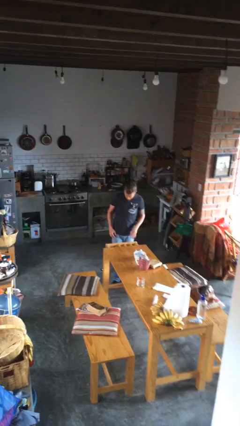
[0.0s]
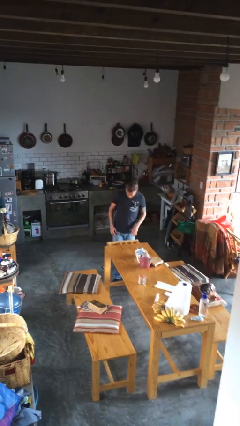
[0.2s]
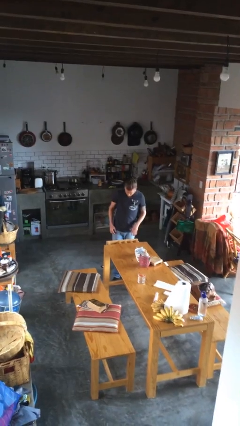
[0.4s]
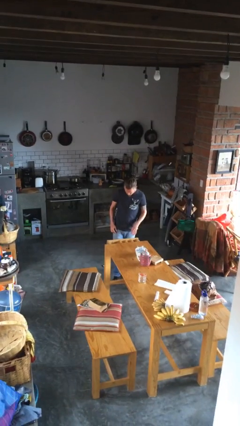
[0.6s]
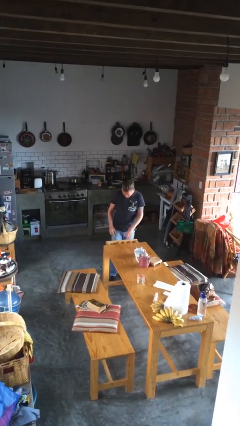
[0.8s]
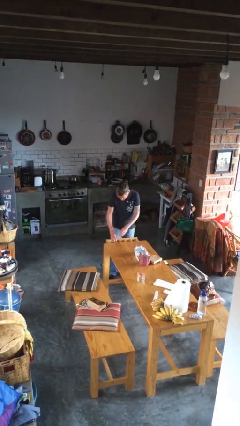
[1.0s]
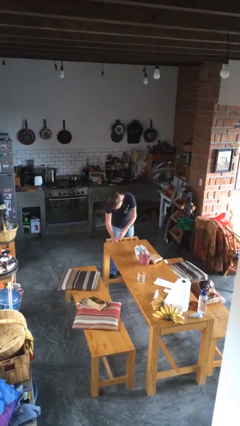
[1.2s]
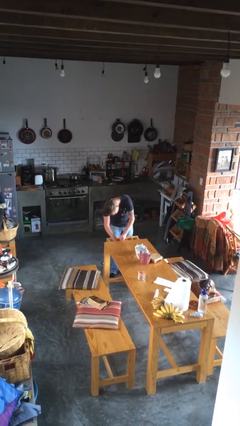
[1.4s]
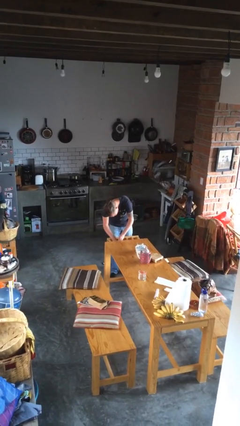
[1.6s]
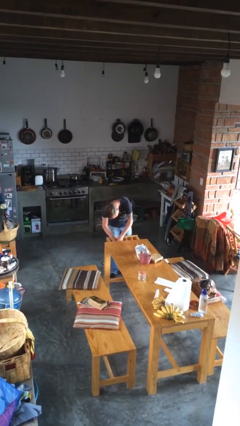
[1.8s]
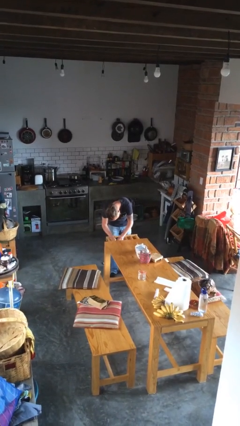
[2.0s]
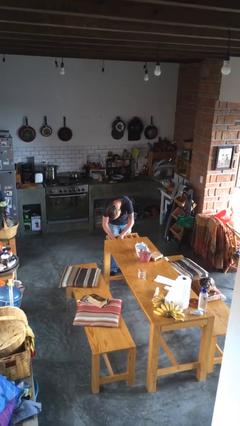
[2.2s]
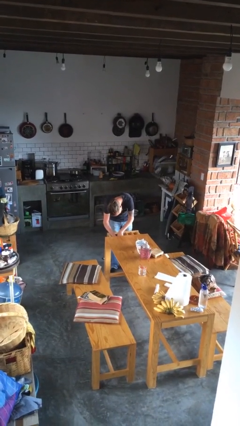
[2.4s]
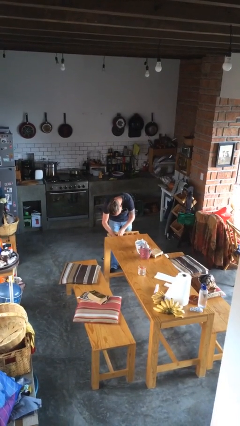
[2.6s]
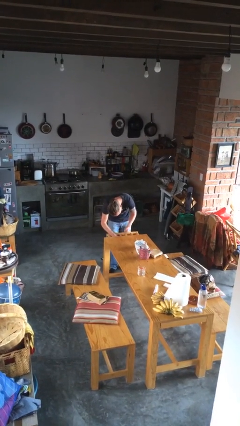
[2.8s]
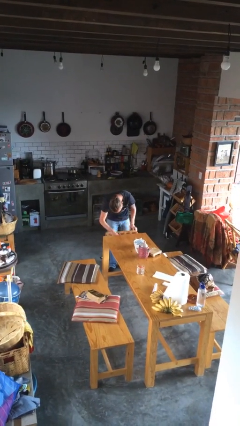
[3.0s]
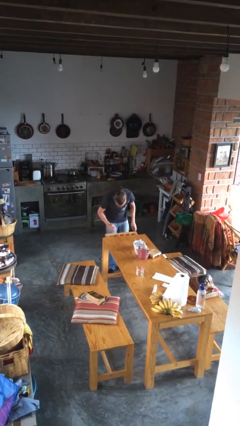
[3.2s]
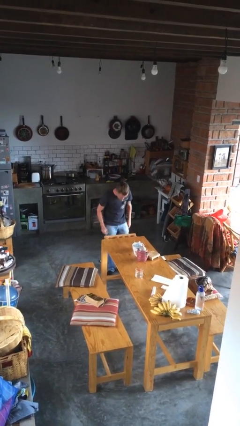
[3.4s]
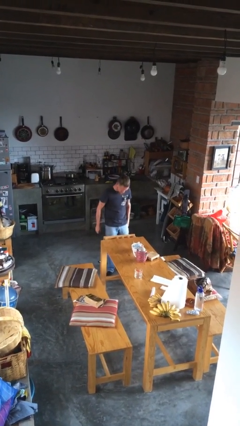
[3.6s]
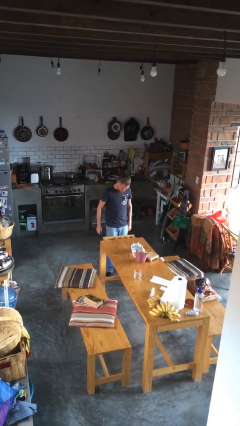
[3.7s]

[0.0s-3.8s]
person searches in cabinet

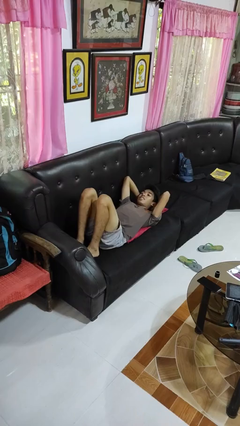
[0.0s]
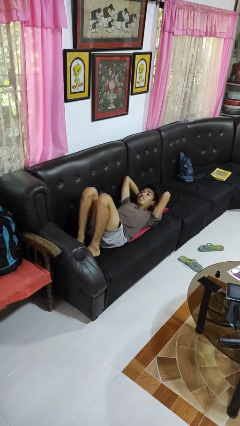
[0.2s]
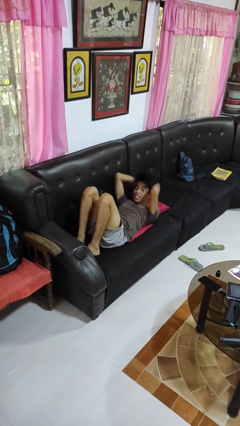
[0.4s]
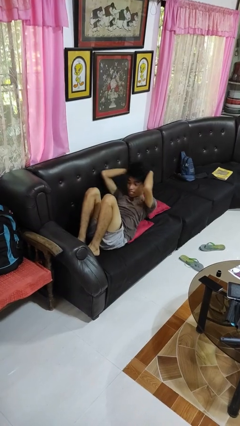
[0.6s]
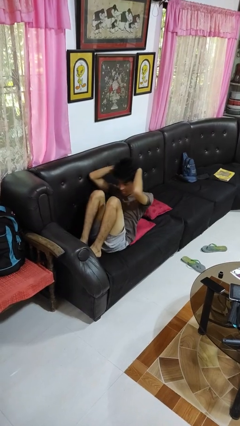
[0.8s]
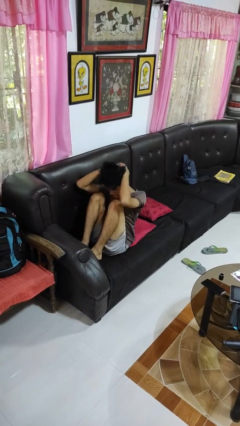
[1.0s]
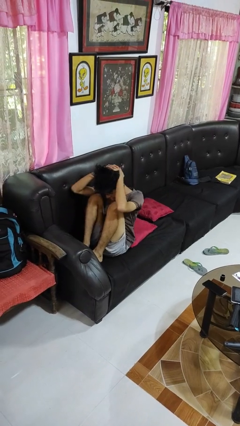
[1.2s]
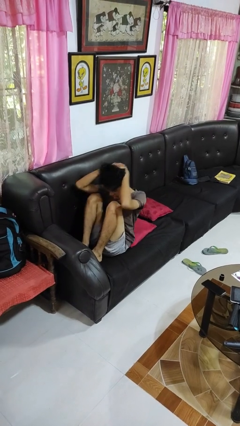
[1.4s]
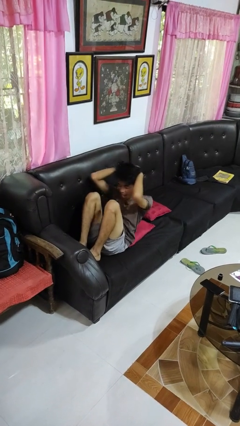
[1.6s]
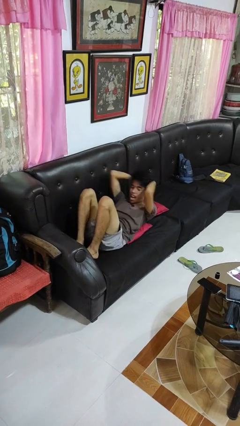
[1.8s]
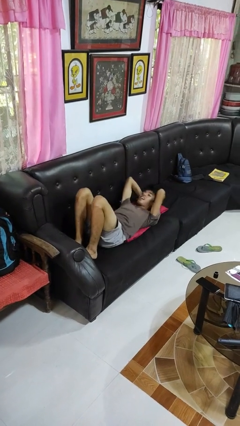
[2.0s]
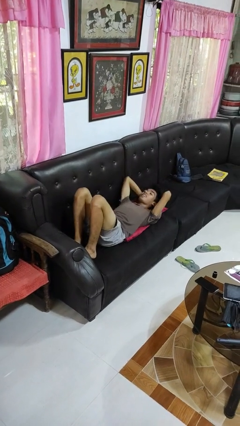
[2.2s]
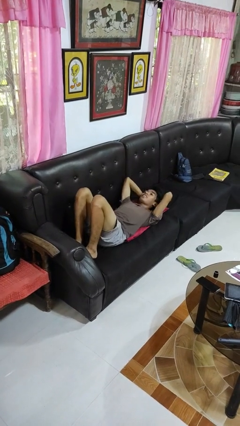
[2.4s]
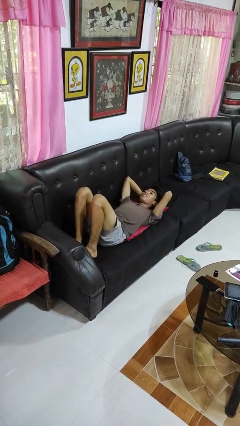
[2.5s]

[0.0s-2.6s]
person exercises with situp

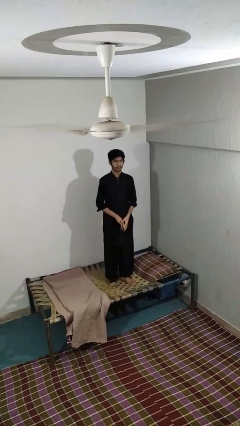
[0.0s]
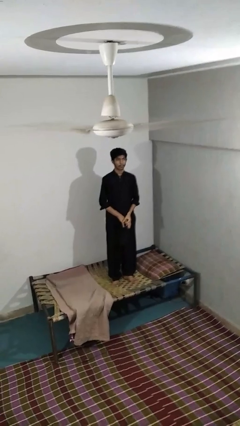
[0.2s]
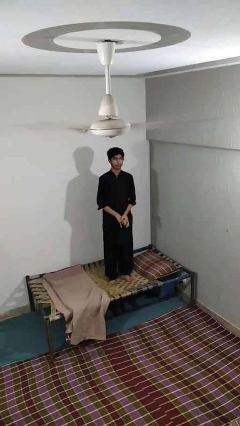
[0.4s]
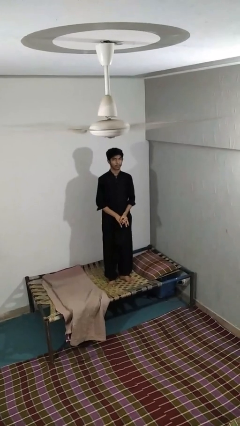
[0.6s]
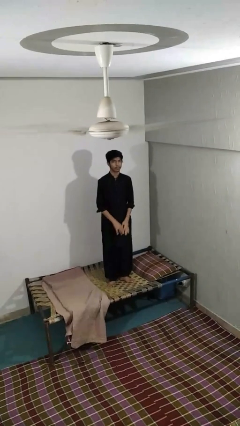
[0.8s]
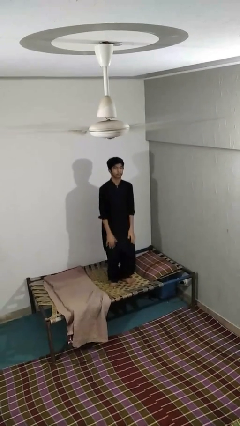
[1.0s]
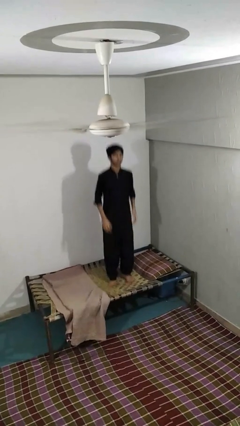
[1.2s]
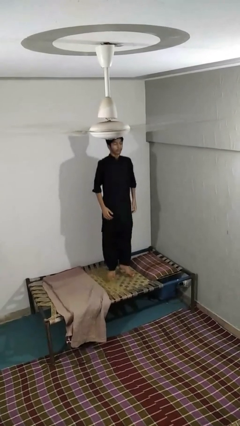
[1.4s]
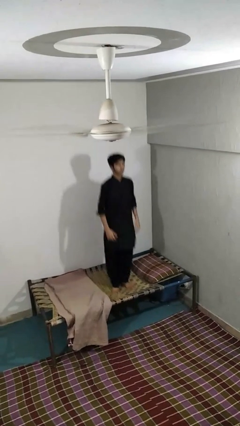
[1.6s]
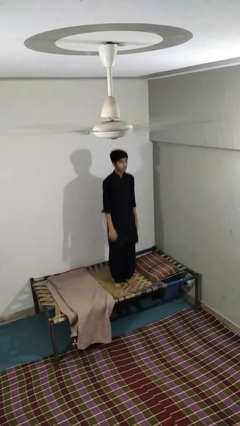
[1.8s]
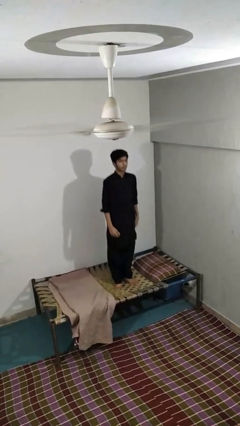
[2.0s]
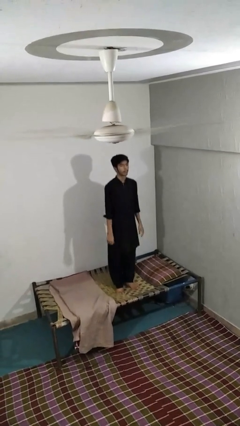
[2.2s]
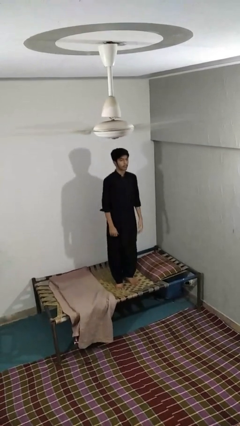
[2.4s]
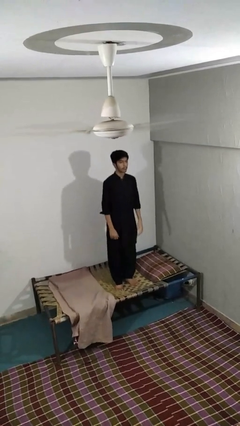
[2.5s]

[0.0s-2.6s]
person jumps on bed

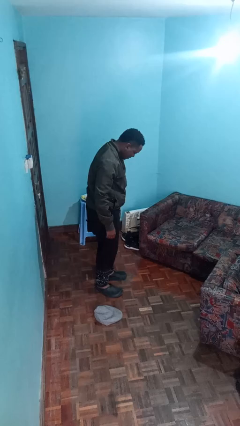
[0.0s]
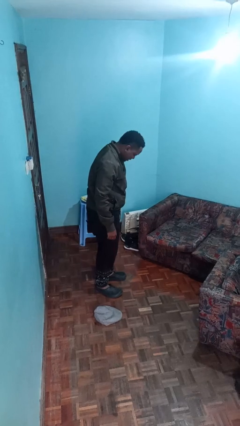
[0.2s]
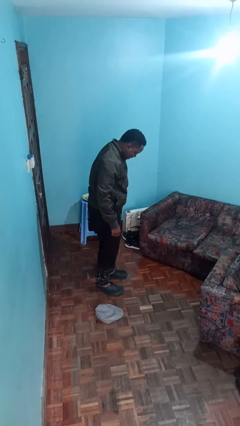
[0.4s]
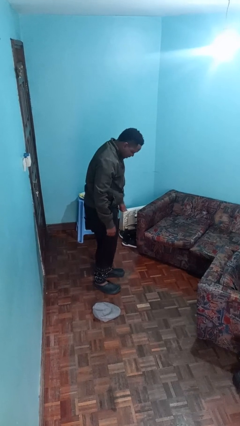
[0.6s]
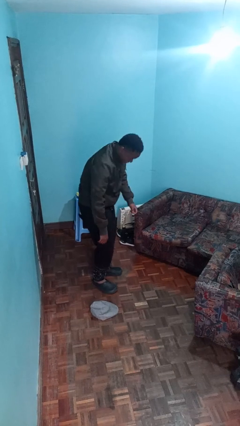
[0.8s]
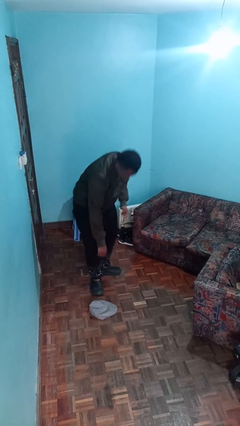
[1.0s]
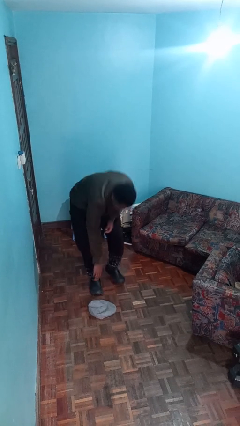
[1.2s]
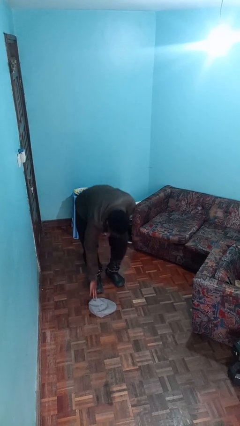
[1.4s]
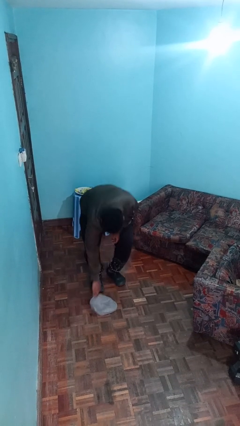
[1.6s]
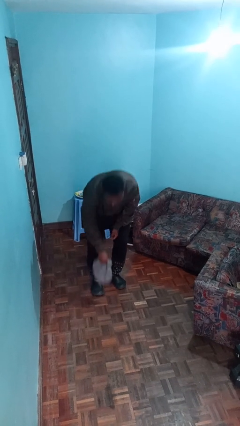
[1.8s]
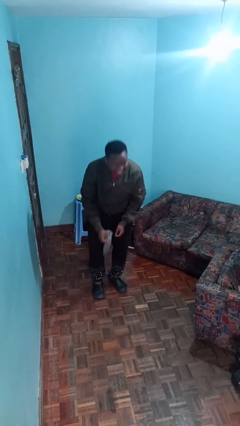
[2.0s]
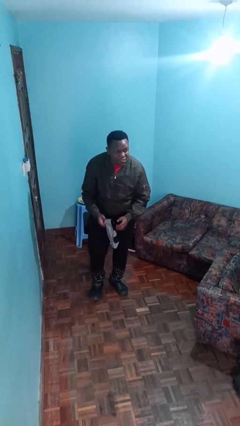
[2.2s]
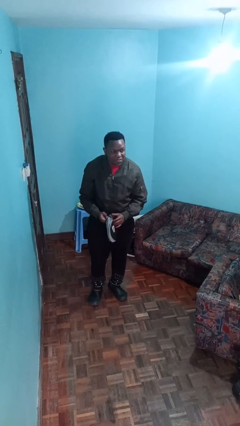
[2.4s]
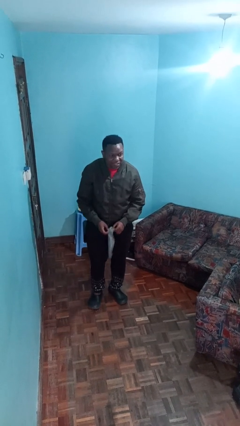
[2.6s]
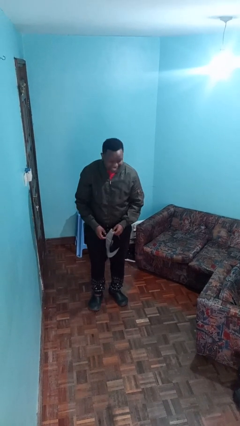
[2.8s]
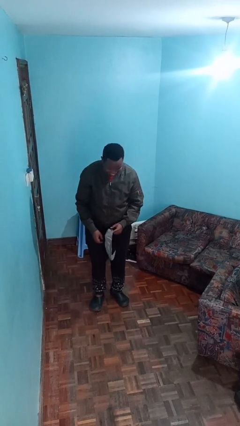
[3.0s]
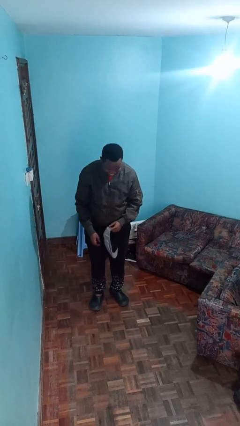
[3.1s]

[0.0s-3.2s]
person picks up object from floor

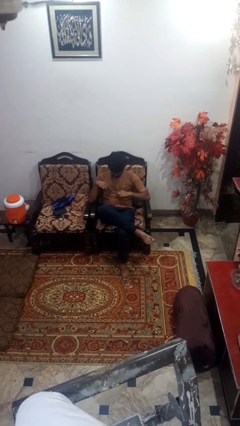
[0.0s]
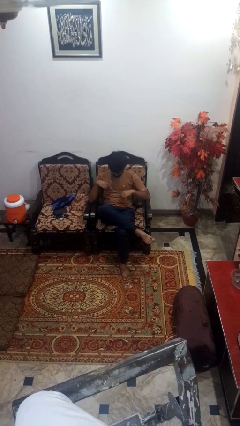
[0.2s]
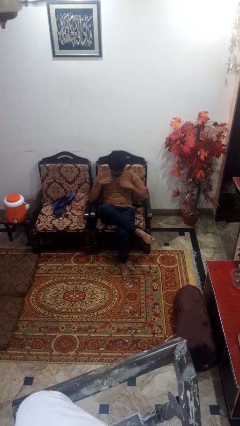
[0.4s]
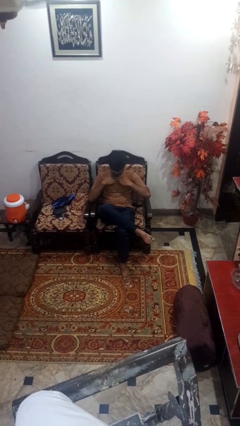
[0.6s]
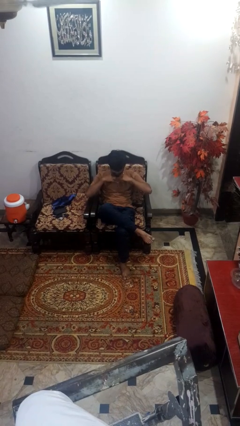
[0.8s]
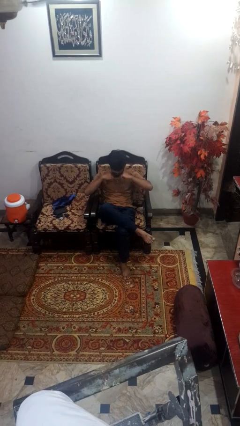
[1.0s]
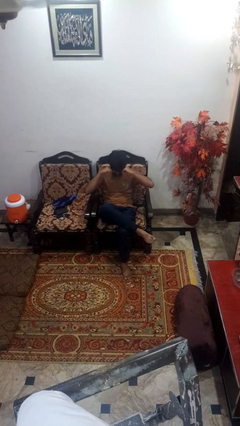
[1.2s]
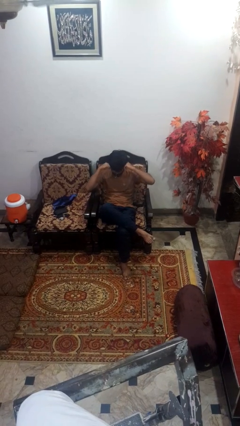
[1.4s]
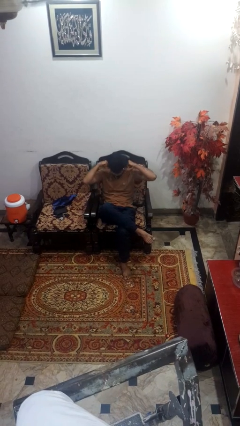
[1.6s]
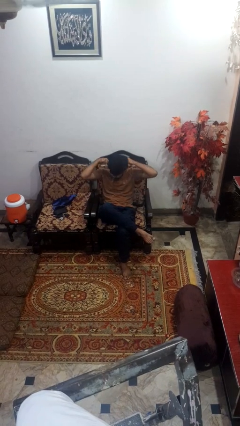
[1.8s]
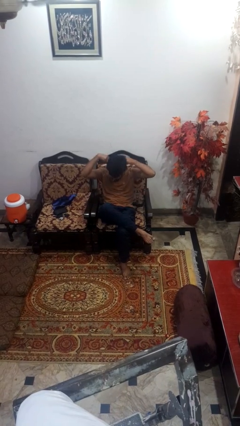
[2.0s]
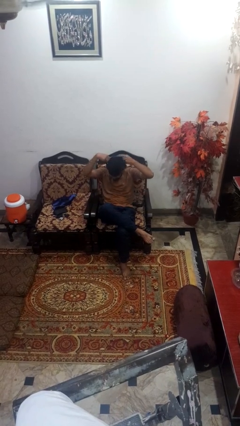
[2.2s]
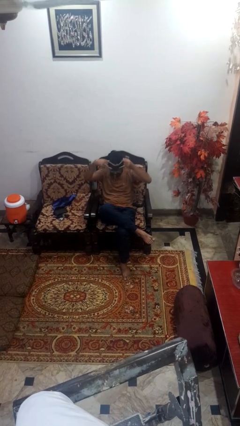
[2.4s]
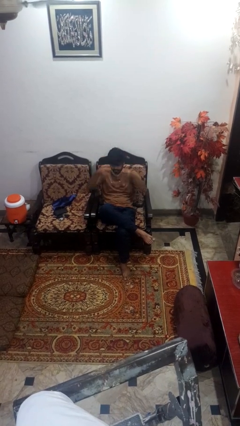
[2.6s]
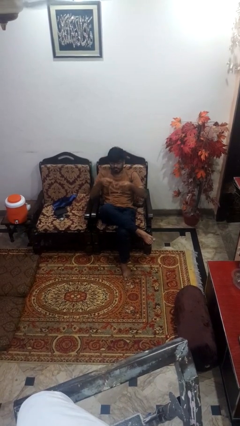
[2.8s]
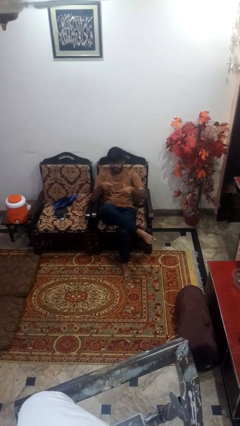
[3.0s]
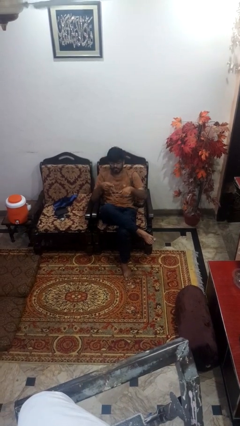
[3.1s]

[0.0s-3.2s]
person takes off necklace

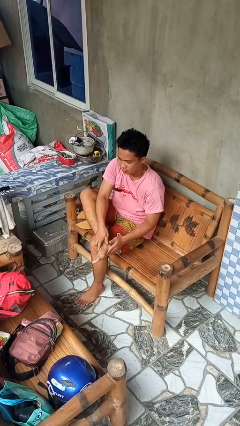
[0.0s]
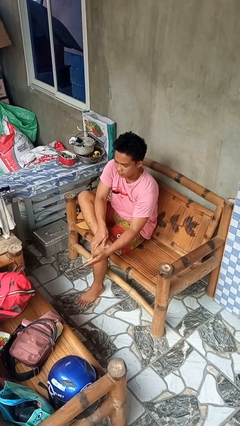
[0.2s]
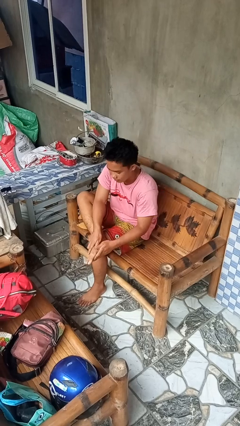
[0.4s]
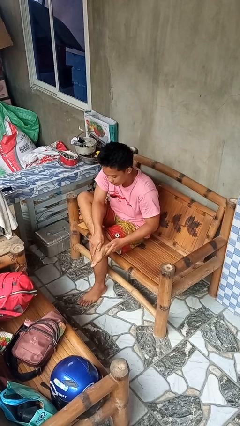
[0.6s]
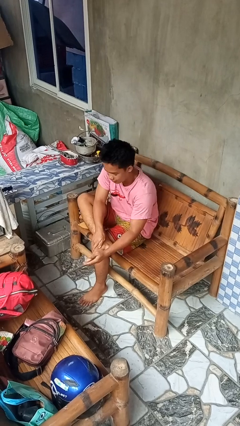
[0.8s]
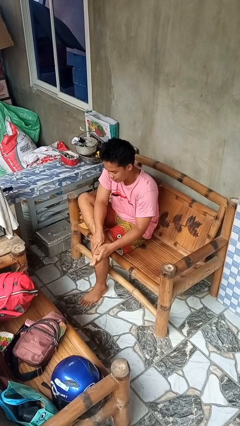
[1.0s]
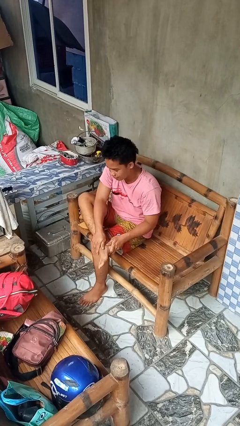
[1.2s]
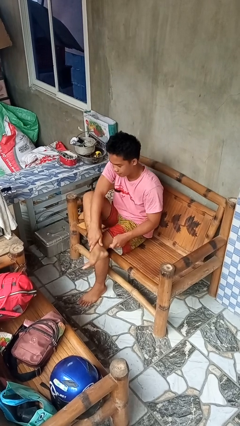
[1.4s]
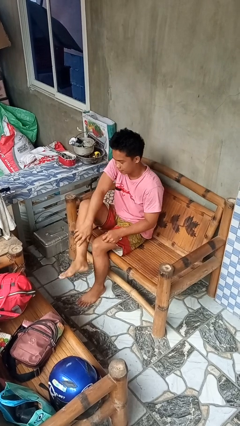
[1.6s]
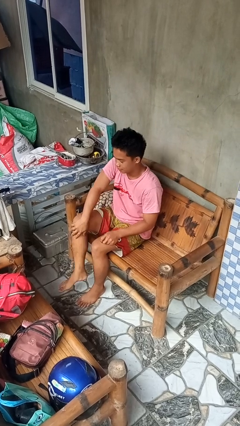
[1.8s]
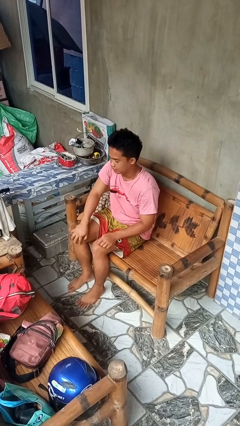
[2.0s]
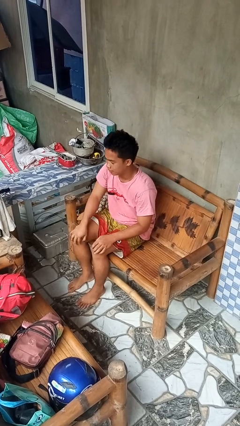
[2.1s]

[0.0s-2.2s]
person rubs foot
